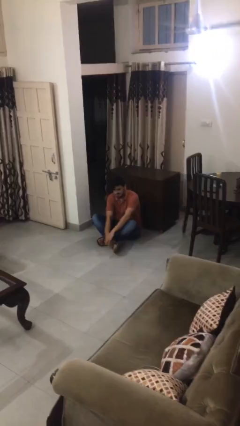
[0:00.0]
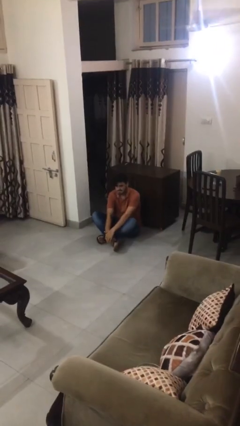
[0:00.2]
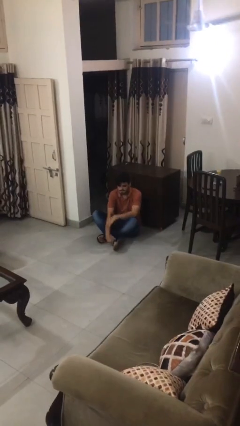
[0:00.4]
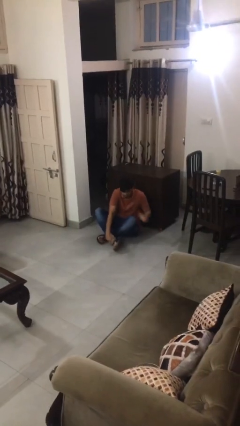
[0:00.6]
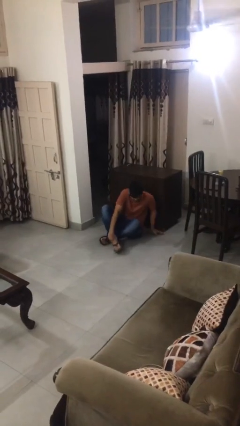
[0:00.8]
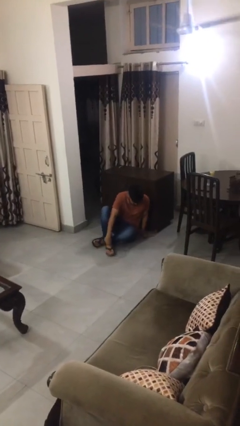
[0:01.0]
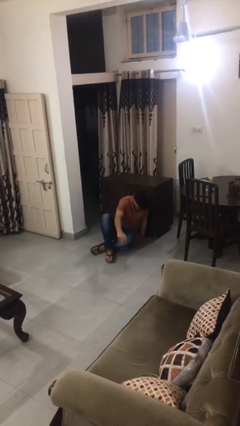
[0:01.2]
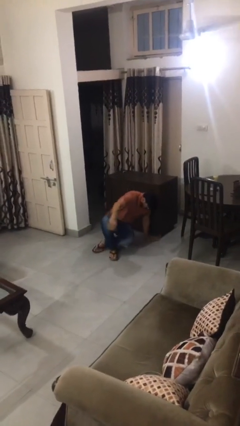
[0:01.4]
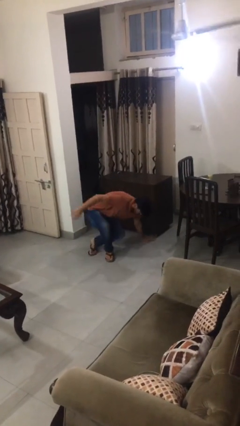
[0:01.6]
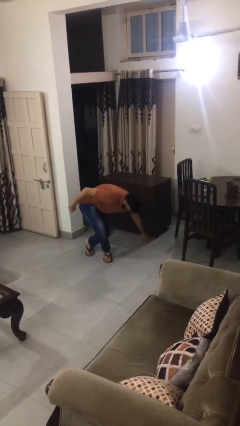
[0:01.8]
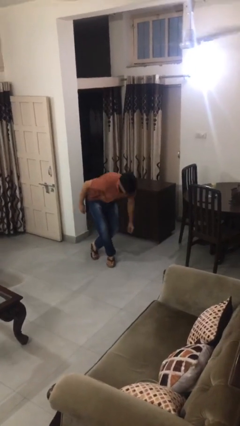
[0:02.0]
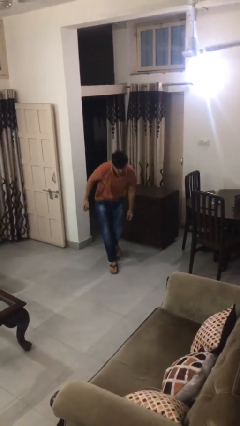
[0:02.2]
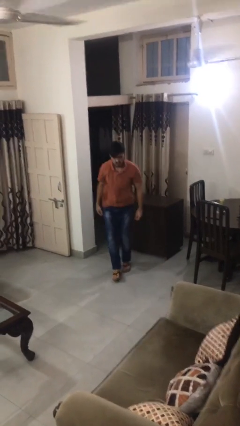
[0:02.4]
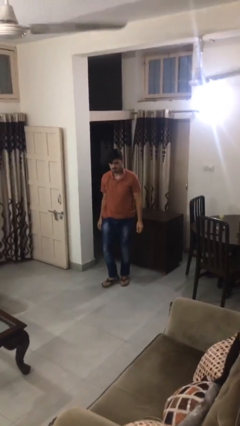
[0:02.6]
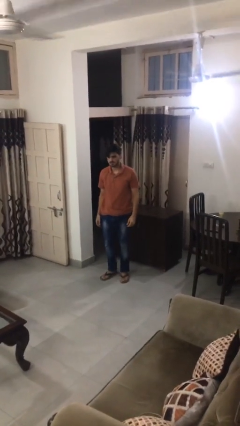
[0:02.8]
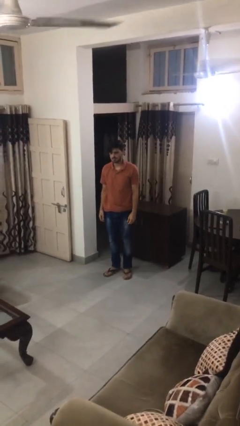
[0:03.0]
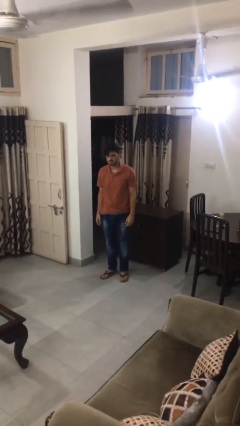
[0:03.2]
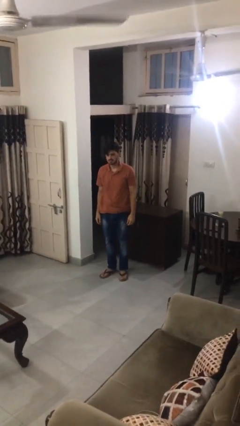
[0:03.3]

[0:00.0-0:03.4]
person stands up from floor

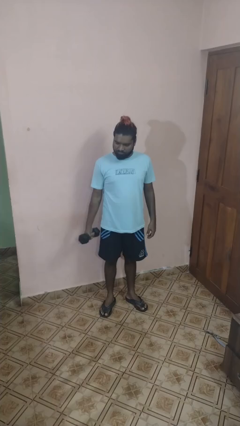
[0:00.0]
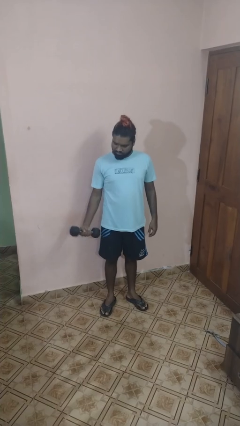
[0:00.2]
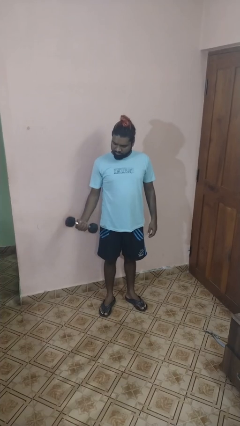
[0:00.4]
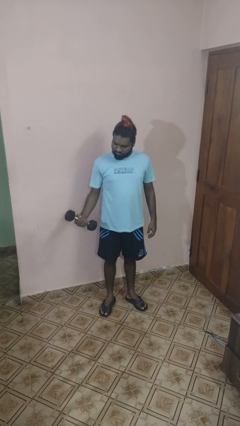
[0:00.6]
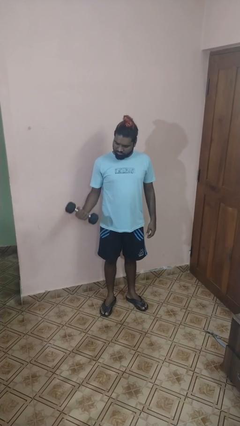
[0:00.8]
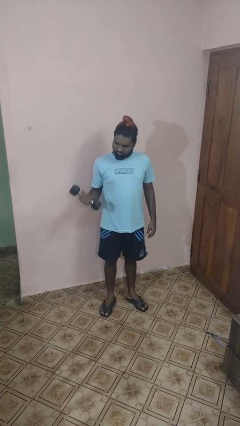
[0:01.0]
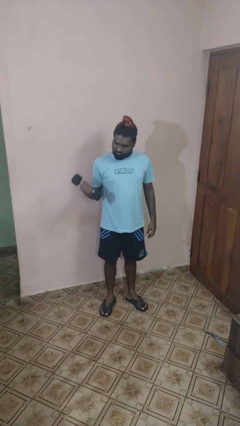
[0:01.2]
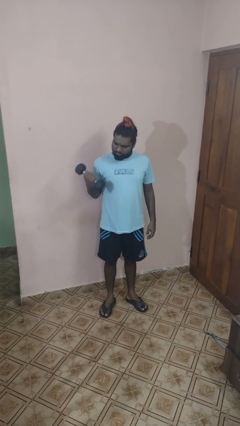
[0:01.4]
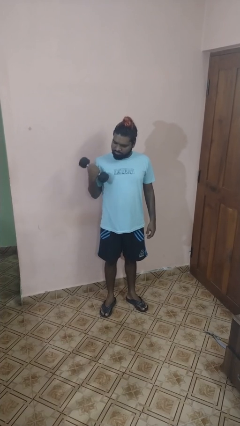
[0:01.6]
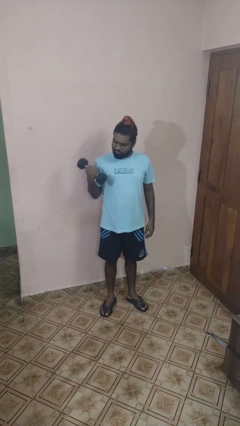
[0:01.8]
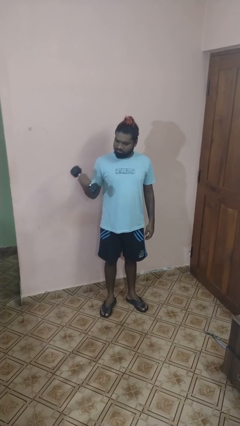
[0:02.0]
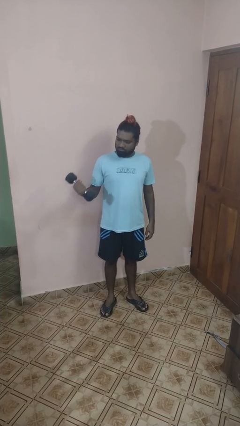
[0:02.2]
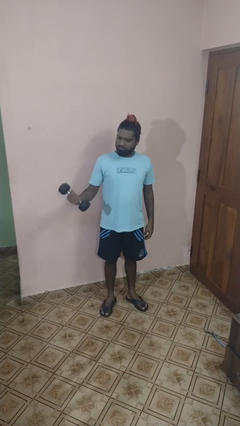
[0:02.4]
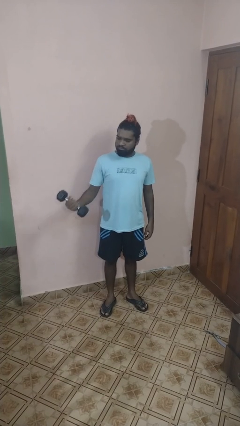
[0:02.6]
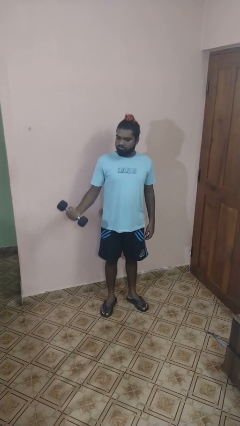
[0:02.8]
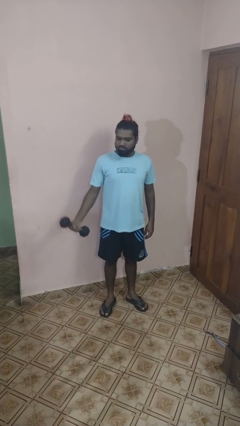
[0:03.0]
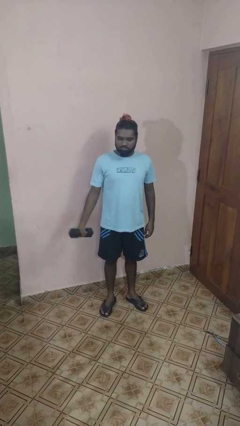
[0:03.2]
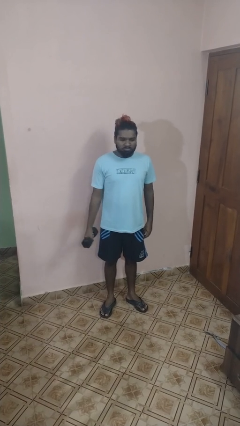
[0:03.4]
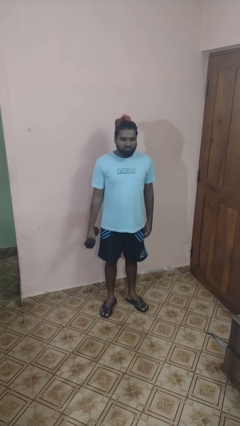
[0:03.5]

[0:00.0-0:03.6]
person lifts dumbbells

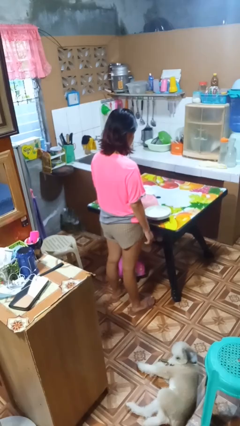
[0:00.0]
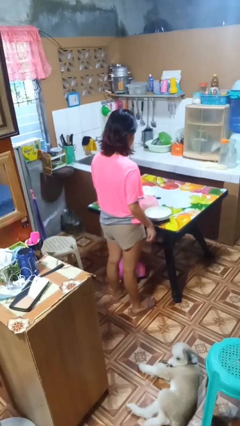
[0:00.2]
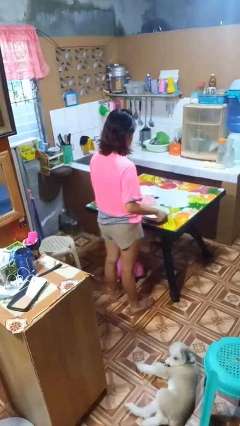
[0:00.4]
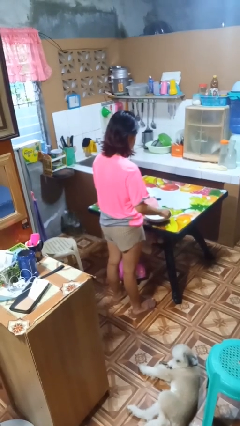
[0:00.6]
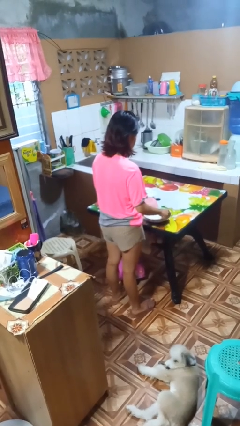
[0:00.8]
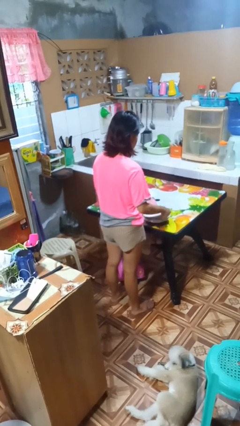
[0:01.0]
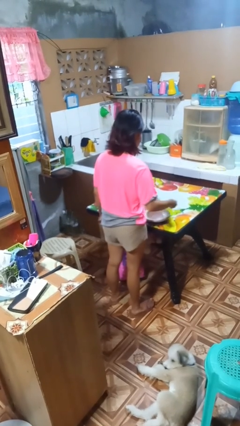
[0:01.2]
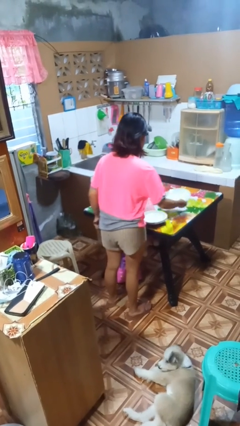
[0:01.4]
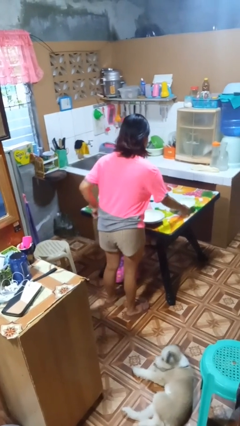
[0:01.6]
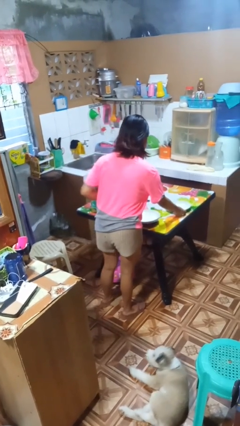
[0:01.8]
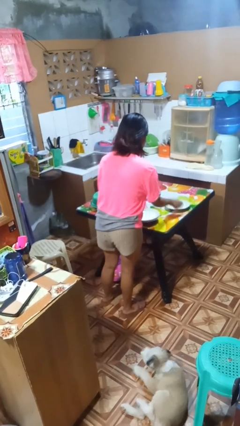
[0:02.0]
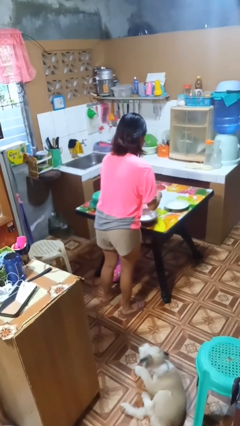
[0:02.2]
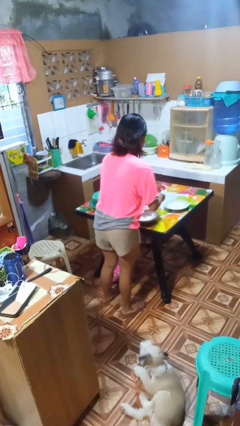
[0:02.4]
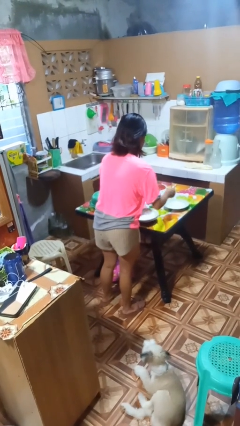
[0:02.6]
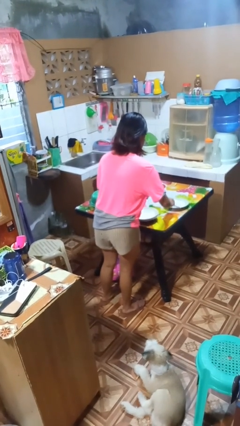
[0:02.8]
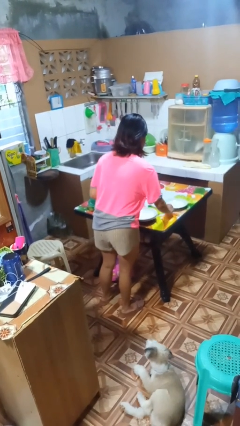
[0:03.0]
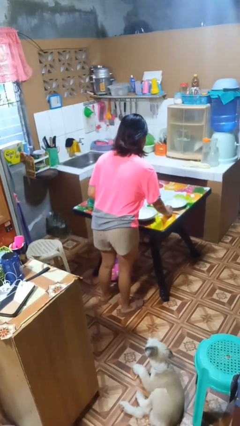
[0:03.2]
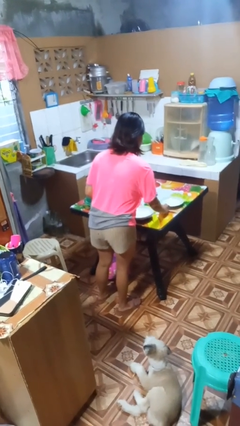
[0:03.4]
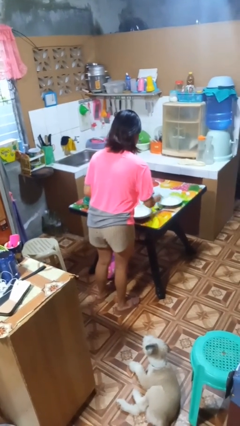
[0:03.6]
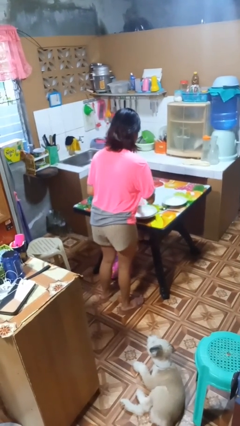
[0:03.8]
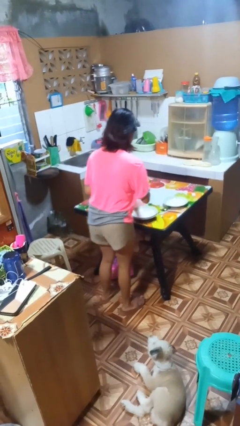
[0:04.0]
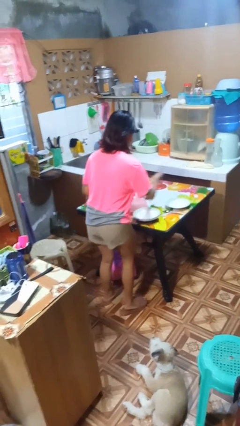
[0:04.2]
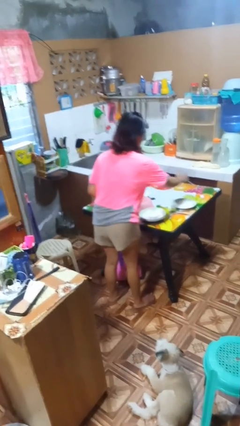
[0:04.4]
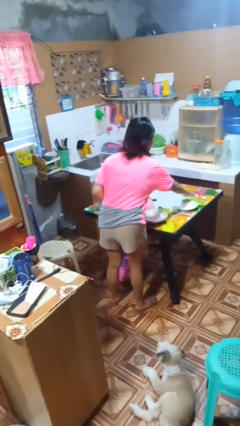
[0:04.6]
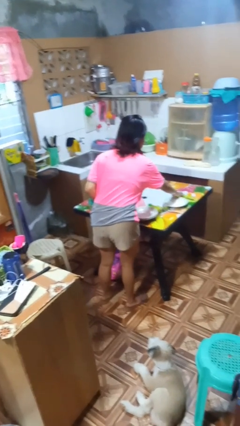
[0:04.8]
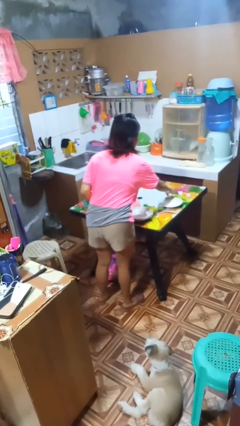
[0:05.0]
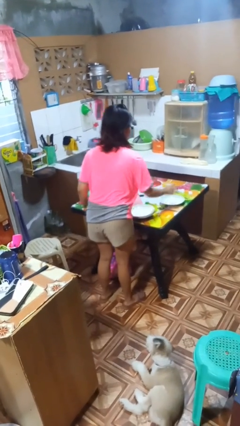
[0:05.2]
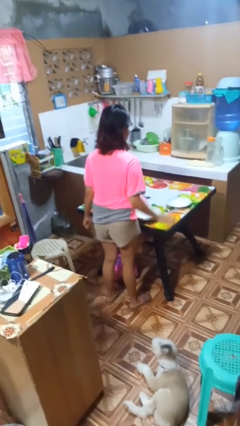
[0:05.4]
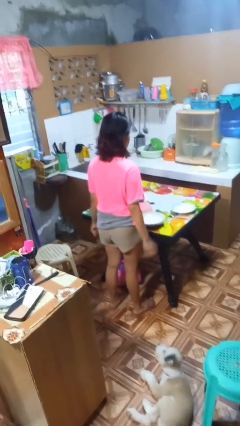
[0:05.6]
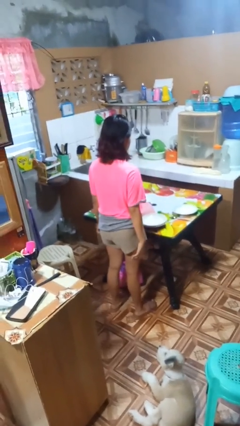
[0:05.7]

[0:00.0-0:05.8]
person sets table

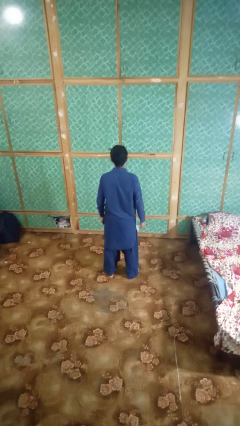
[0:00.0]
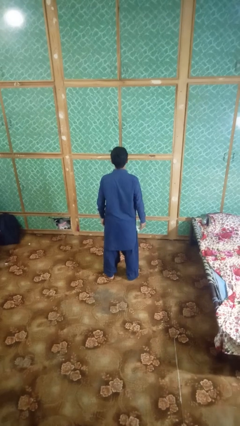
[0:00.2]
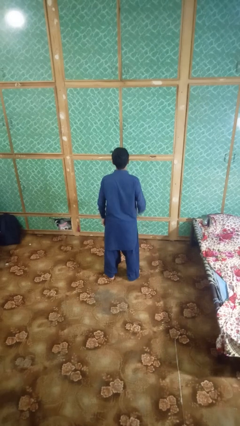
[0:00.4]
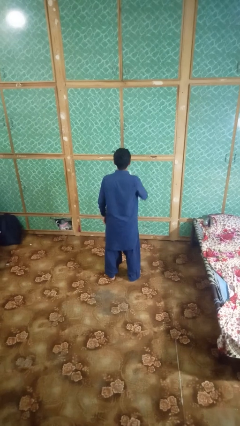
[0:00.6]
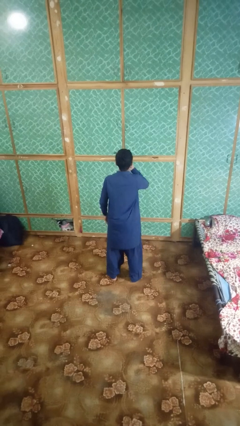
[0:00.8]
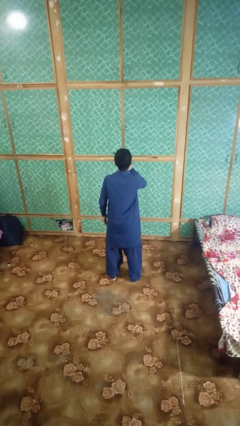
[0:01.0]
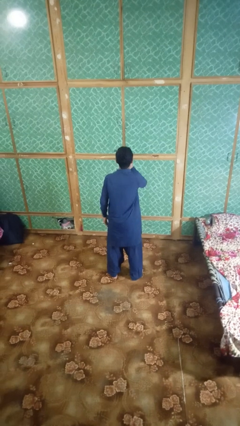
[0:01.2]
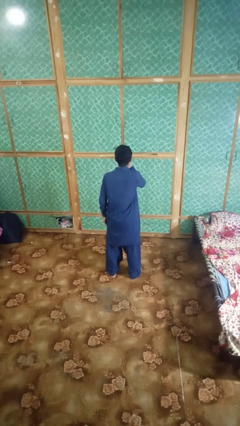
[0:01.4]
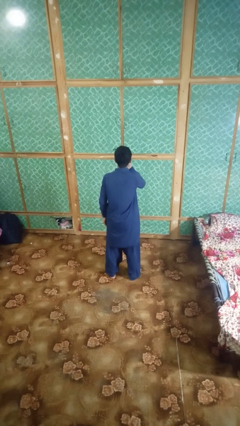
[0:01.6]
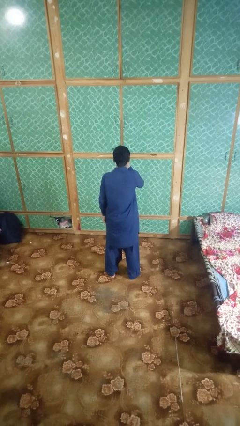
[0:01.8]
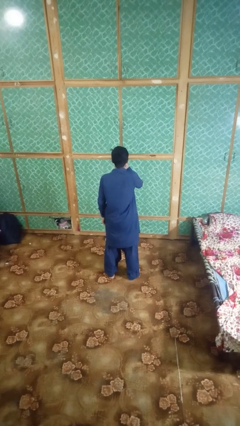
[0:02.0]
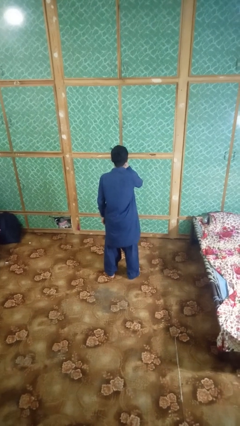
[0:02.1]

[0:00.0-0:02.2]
person blows nose

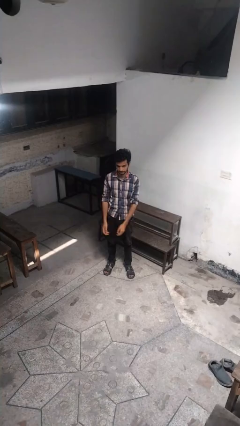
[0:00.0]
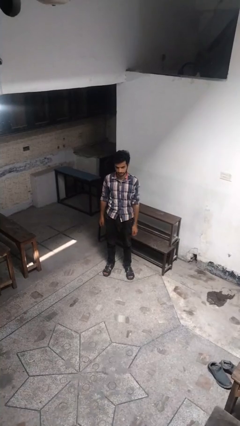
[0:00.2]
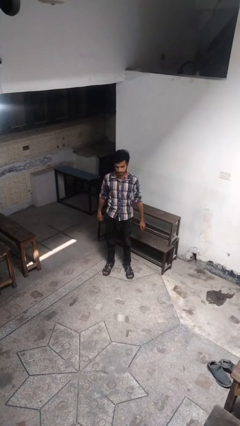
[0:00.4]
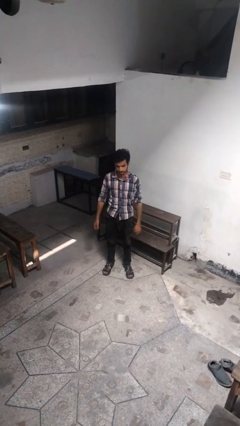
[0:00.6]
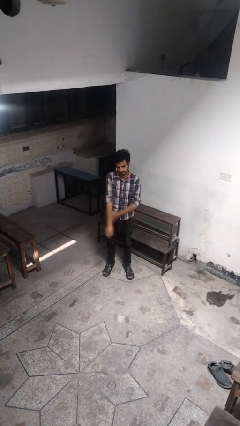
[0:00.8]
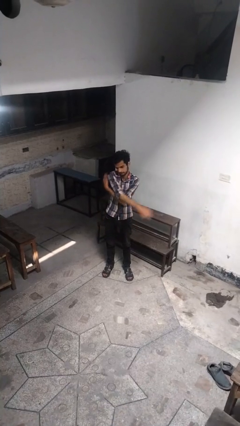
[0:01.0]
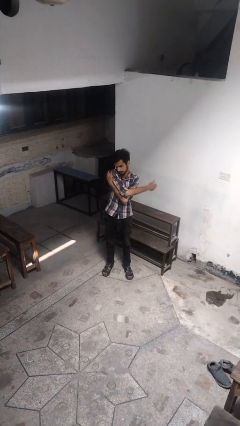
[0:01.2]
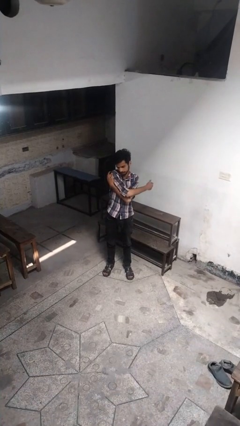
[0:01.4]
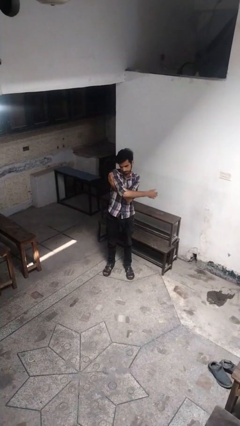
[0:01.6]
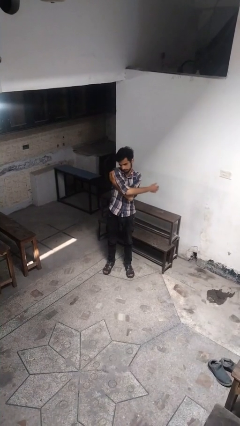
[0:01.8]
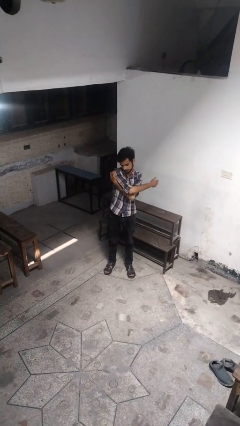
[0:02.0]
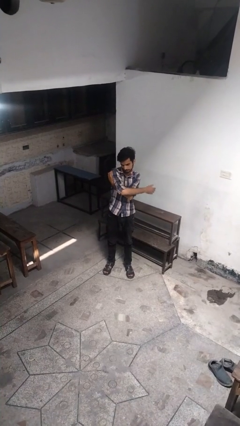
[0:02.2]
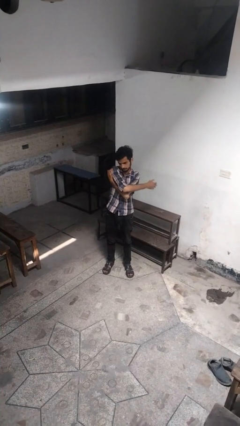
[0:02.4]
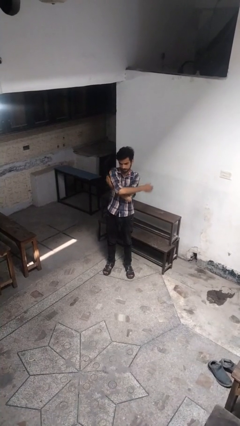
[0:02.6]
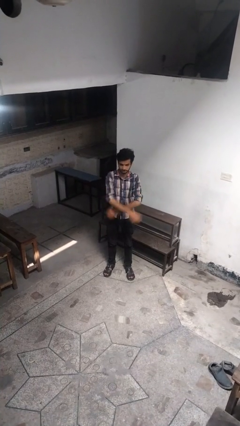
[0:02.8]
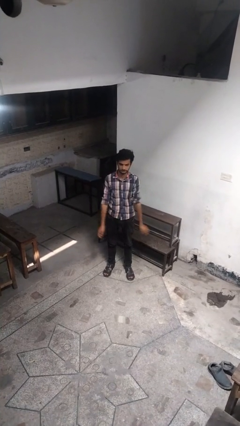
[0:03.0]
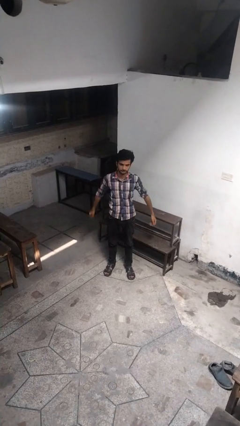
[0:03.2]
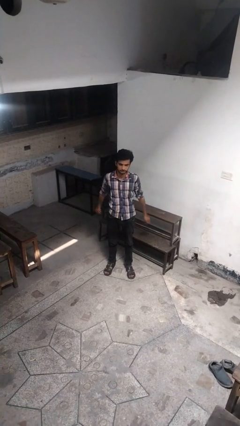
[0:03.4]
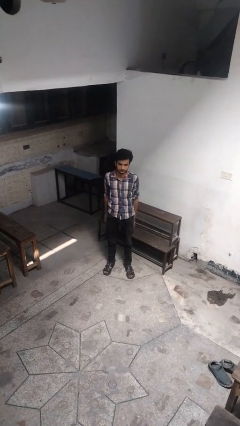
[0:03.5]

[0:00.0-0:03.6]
person stretches arms to side
